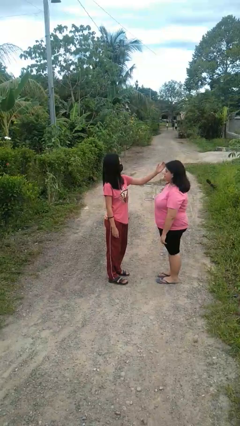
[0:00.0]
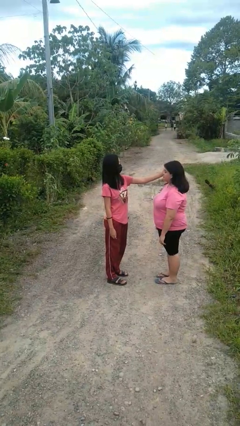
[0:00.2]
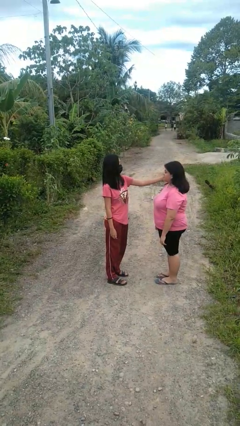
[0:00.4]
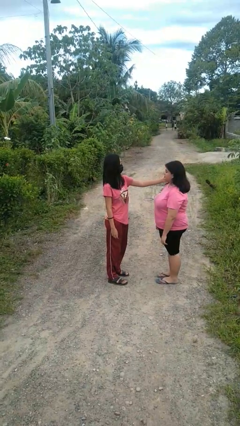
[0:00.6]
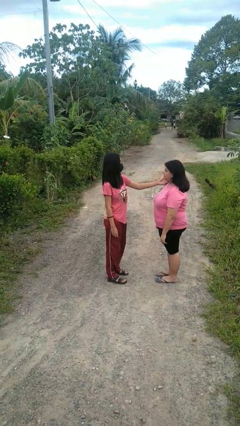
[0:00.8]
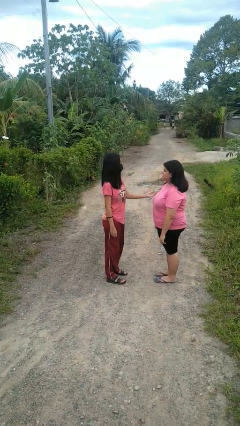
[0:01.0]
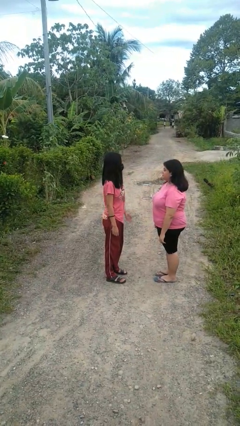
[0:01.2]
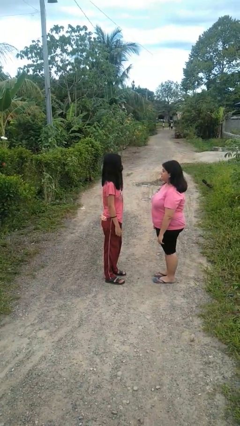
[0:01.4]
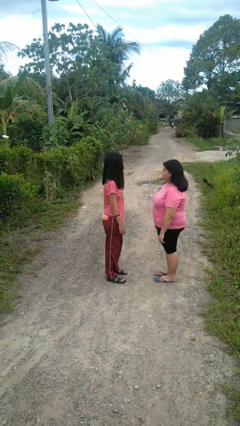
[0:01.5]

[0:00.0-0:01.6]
person touches face of person

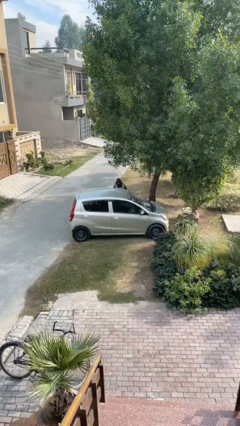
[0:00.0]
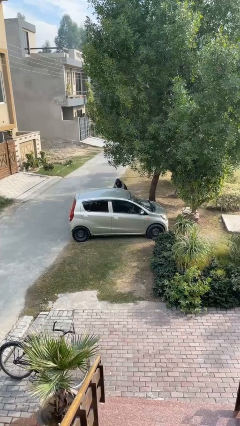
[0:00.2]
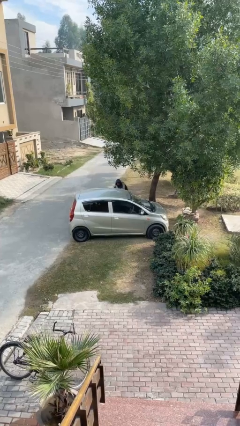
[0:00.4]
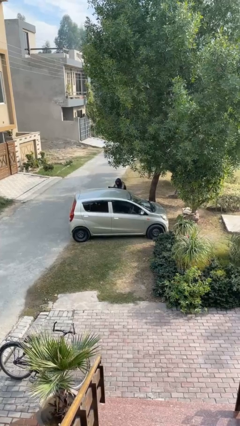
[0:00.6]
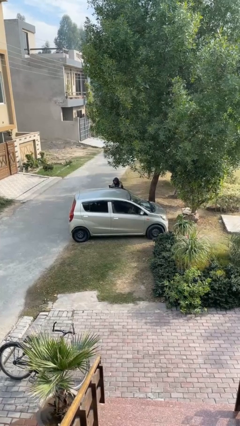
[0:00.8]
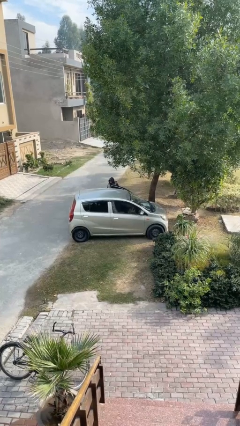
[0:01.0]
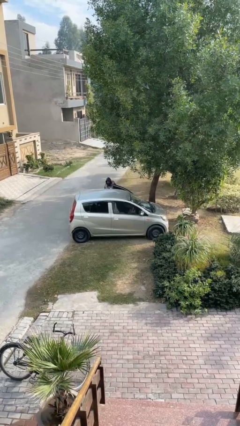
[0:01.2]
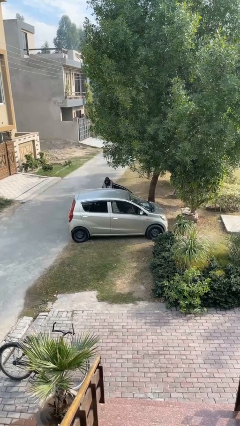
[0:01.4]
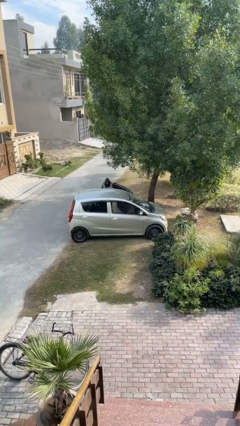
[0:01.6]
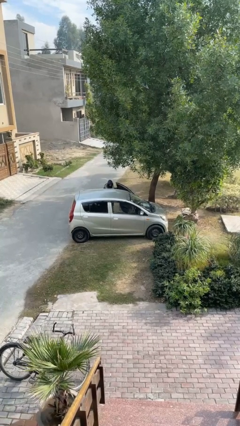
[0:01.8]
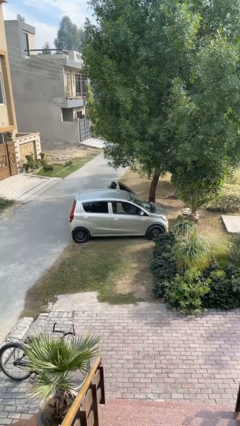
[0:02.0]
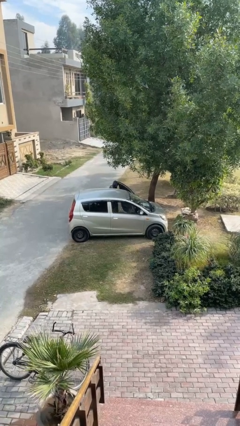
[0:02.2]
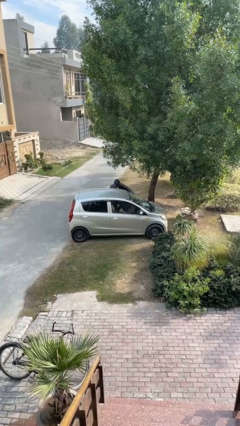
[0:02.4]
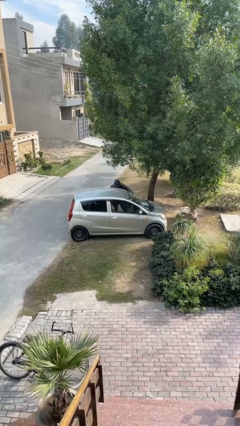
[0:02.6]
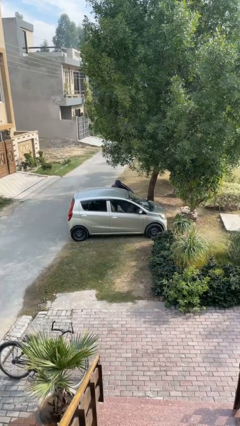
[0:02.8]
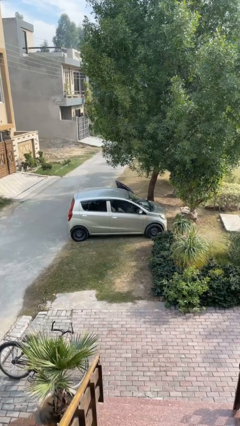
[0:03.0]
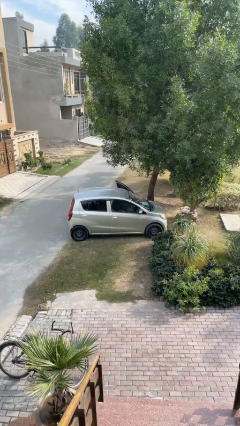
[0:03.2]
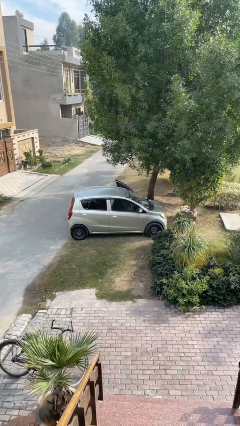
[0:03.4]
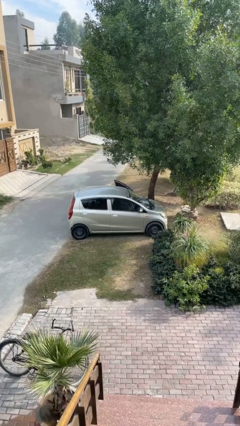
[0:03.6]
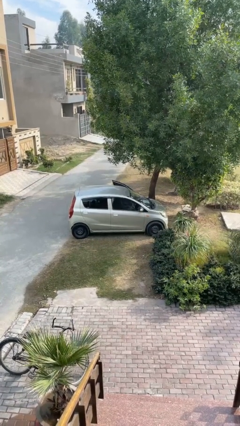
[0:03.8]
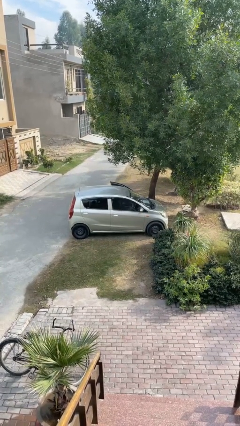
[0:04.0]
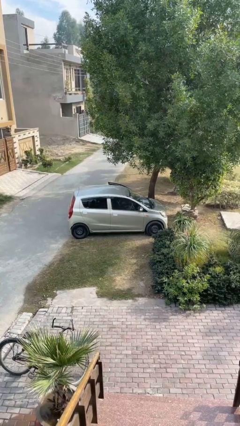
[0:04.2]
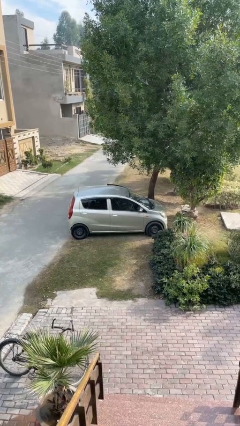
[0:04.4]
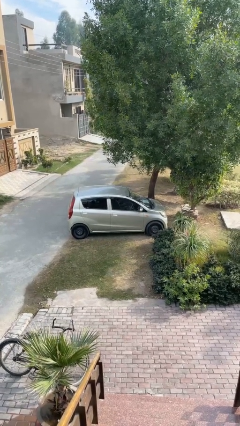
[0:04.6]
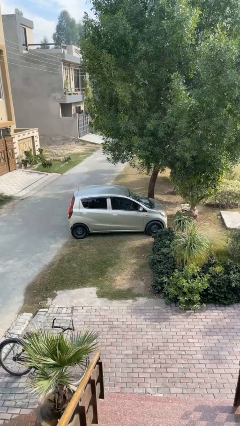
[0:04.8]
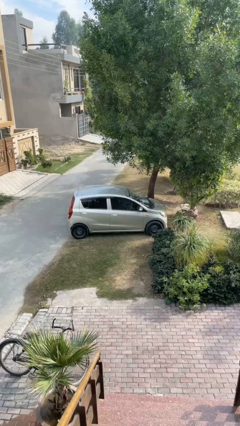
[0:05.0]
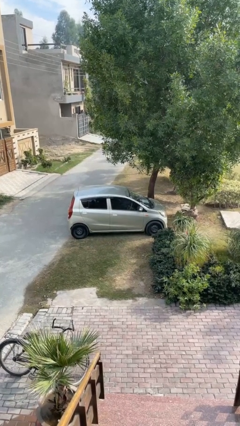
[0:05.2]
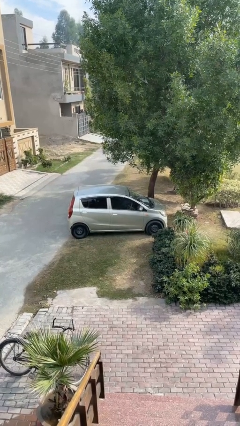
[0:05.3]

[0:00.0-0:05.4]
car picks up person

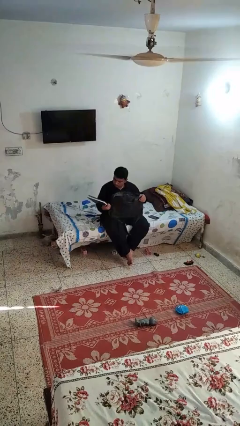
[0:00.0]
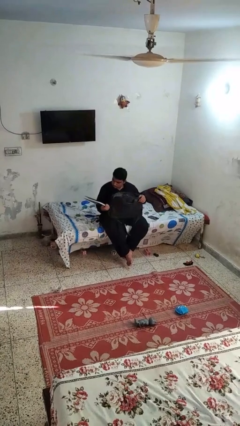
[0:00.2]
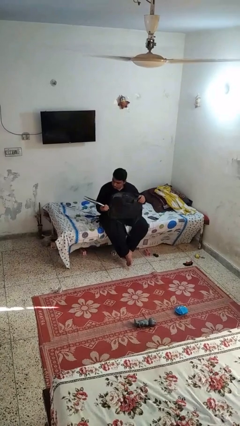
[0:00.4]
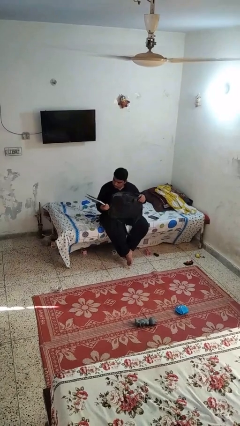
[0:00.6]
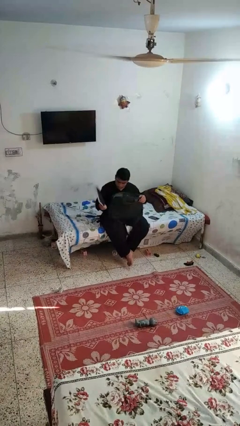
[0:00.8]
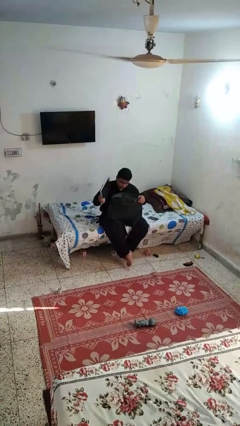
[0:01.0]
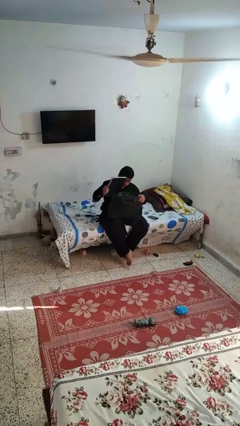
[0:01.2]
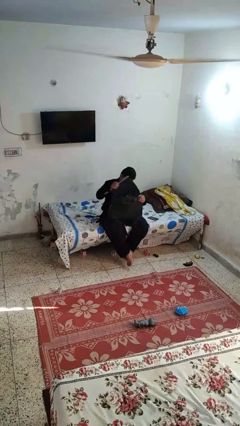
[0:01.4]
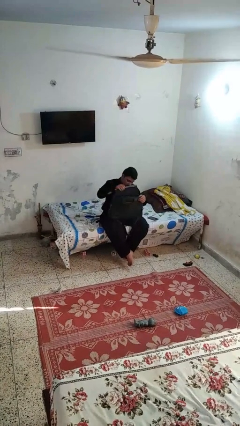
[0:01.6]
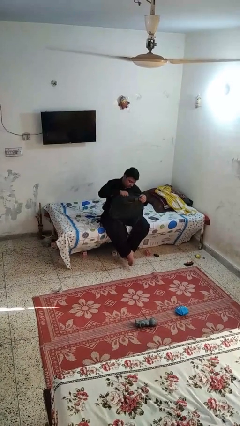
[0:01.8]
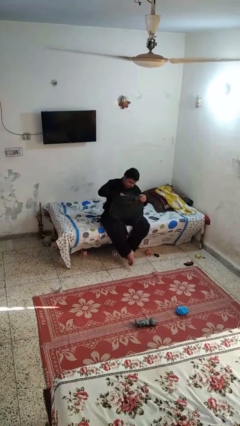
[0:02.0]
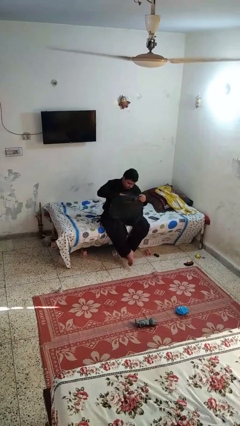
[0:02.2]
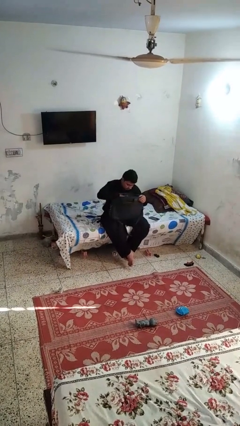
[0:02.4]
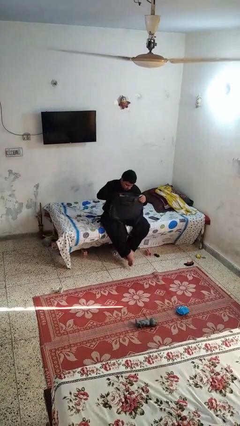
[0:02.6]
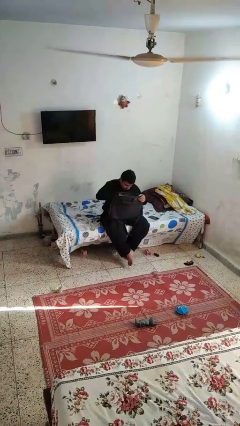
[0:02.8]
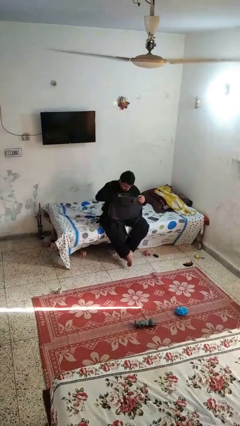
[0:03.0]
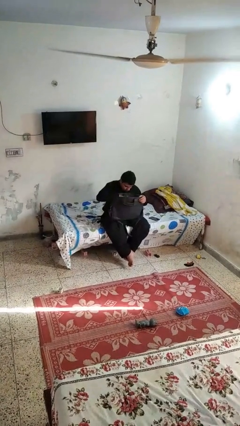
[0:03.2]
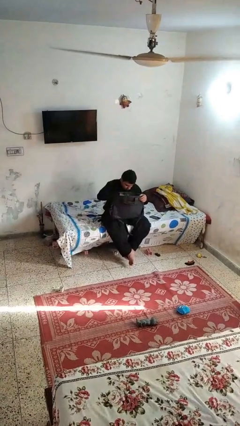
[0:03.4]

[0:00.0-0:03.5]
person puts object into backpack

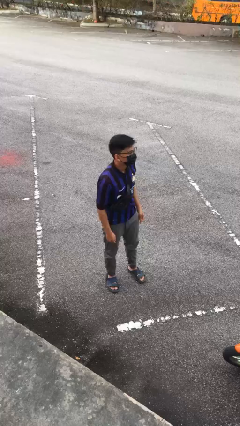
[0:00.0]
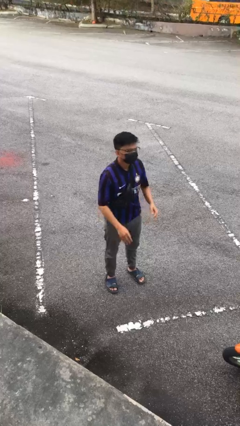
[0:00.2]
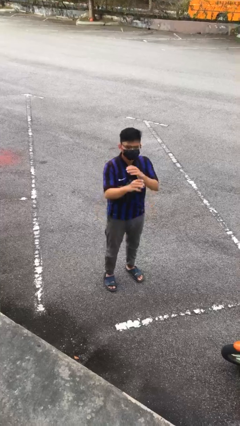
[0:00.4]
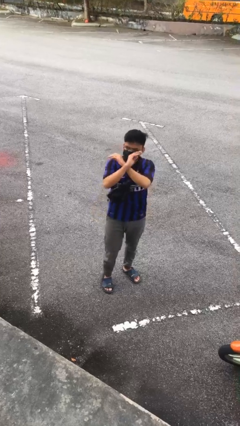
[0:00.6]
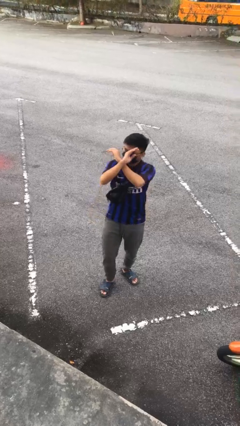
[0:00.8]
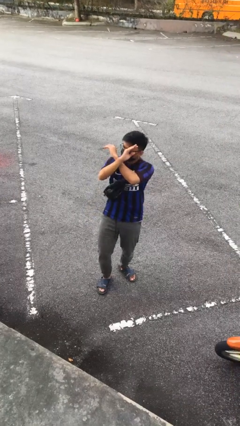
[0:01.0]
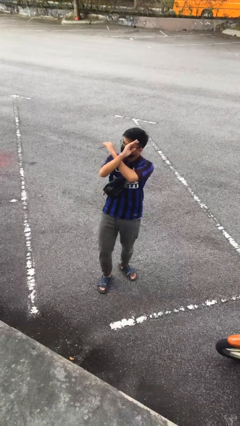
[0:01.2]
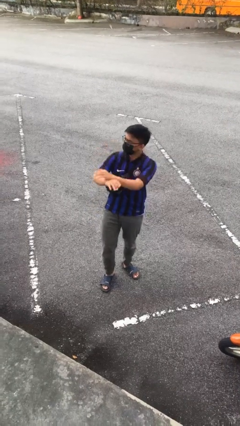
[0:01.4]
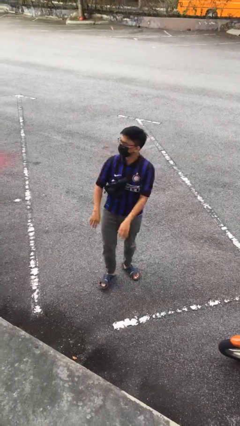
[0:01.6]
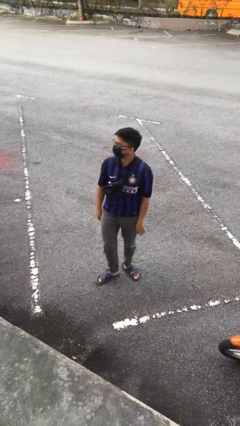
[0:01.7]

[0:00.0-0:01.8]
person gestures arms x

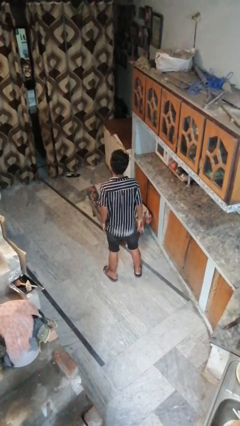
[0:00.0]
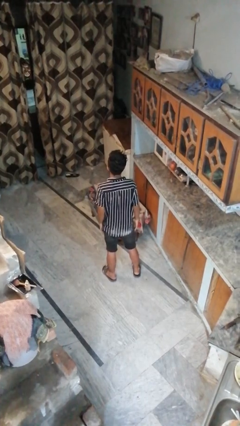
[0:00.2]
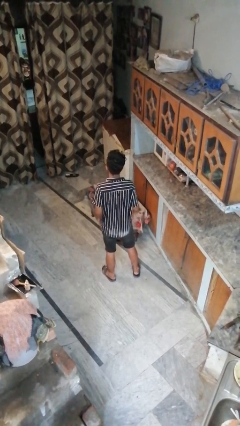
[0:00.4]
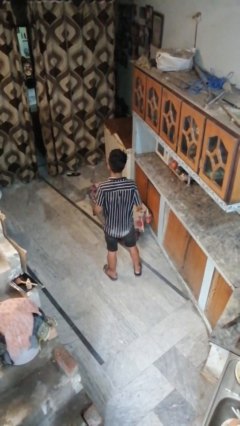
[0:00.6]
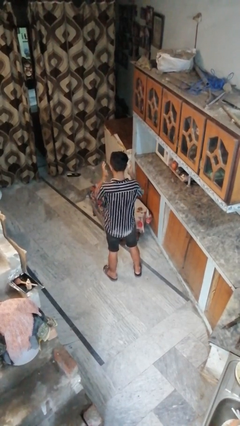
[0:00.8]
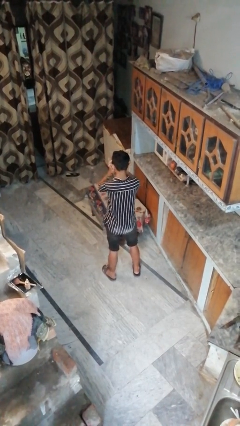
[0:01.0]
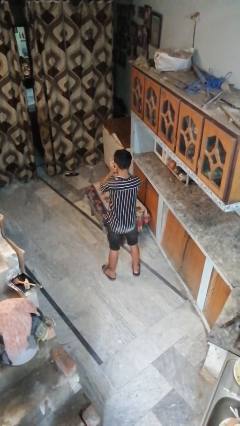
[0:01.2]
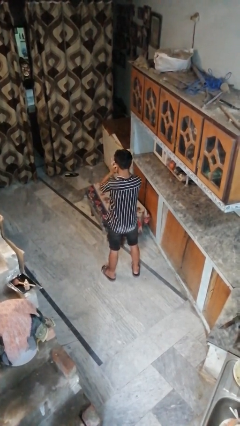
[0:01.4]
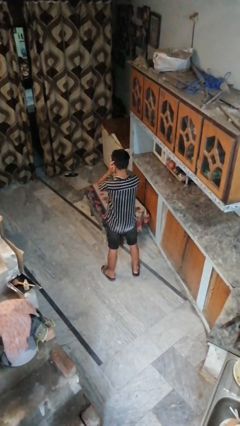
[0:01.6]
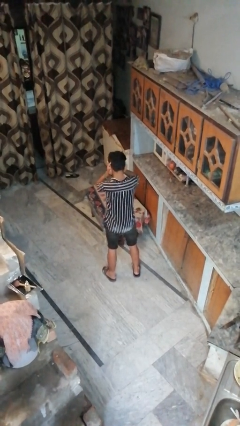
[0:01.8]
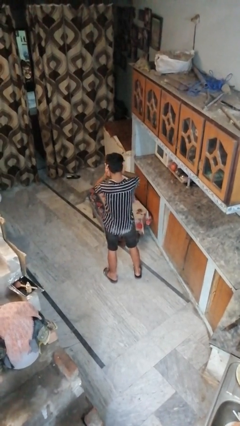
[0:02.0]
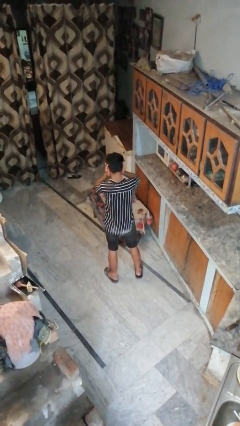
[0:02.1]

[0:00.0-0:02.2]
person puts fingers in ear

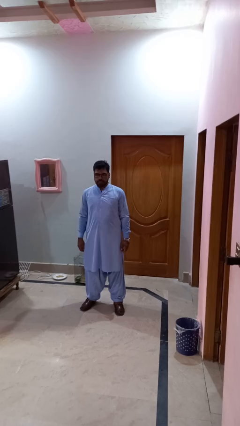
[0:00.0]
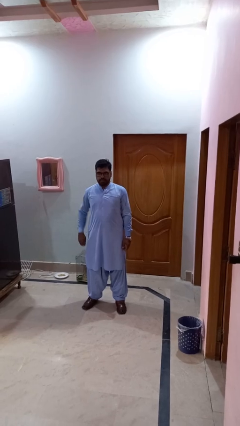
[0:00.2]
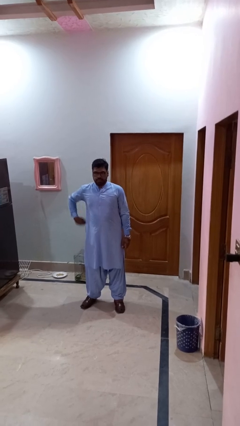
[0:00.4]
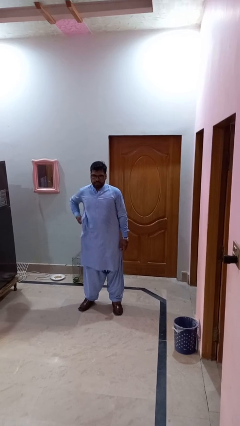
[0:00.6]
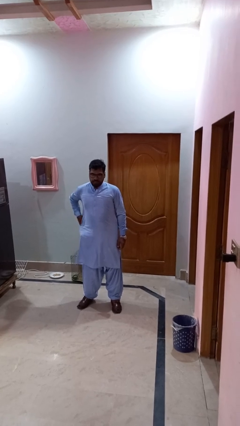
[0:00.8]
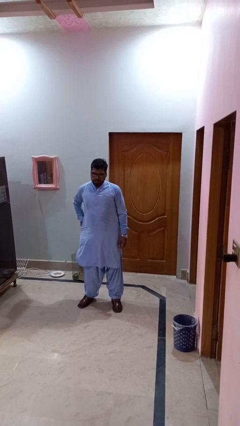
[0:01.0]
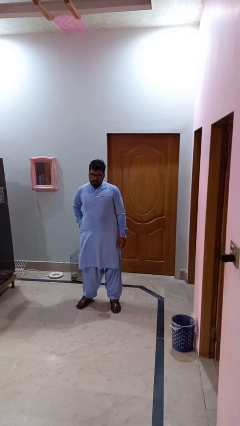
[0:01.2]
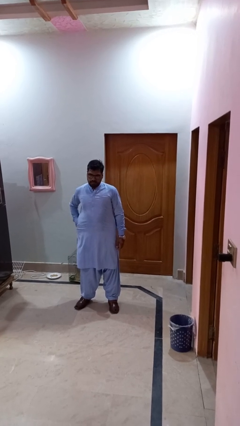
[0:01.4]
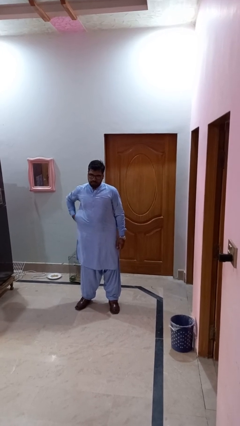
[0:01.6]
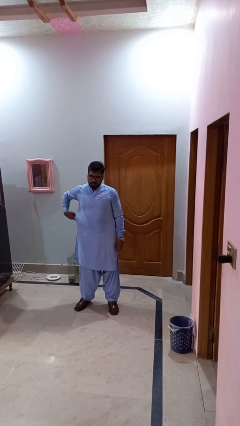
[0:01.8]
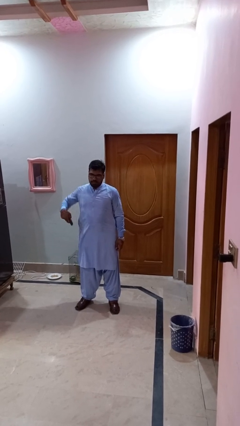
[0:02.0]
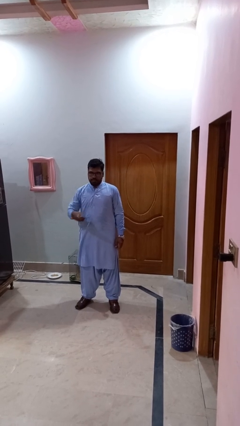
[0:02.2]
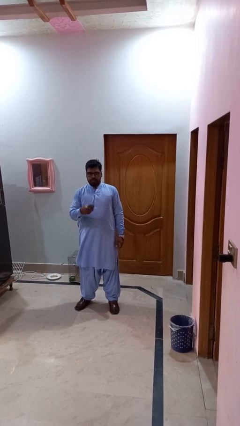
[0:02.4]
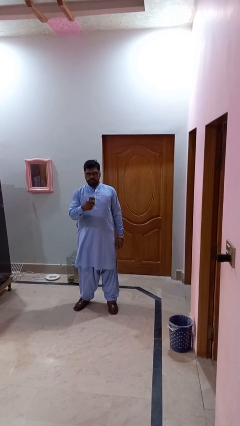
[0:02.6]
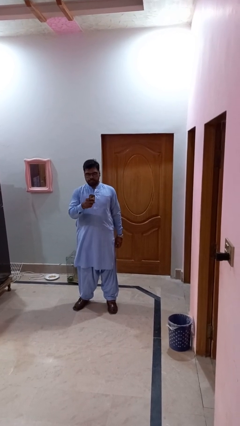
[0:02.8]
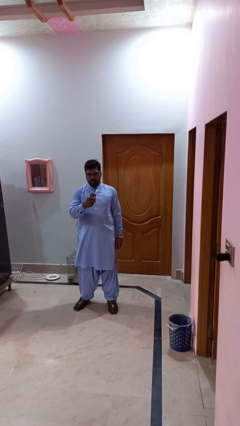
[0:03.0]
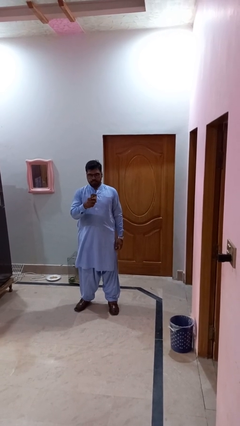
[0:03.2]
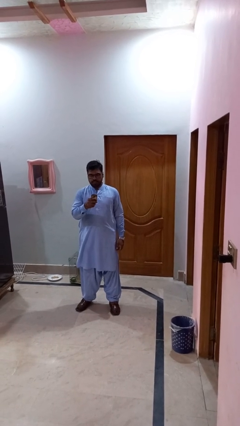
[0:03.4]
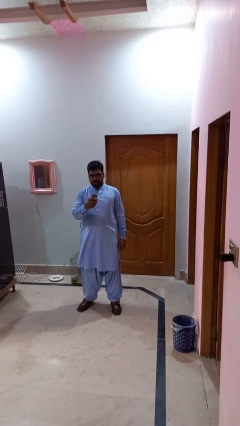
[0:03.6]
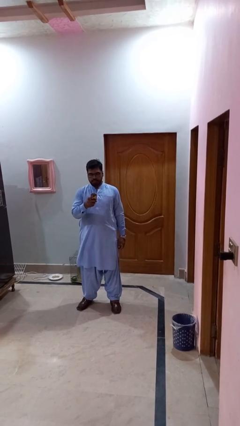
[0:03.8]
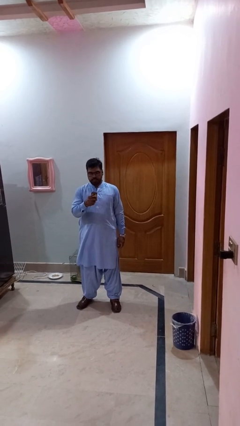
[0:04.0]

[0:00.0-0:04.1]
person takes phone from pocket
